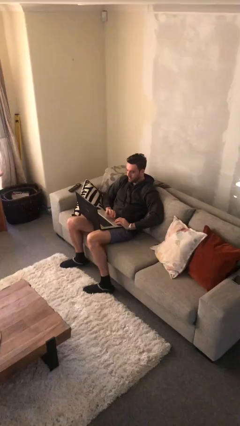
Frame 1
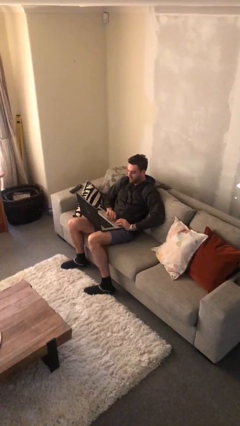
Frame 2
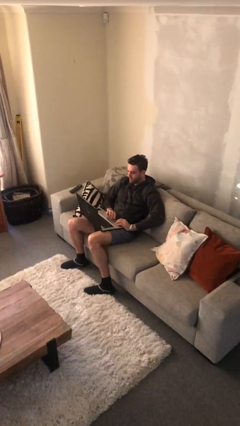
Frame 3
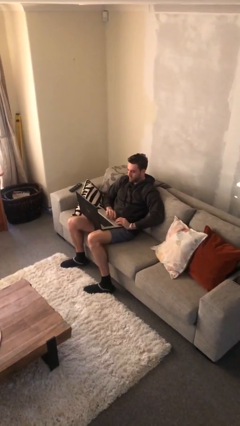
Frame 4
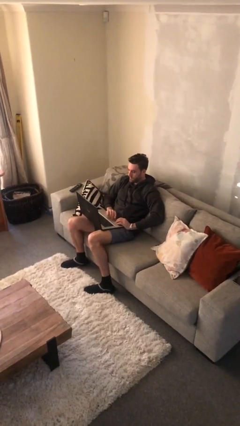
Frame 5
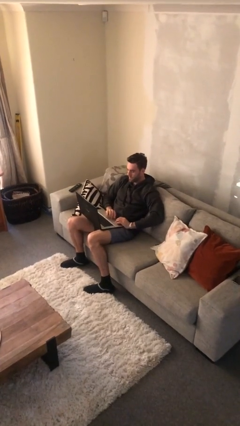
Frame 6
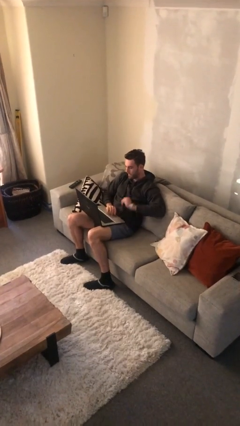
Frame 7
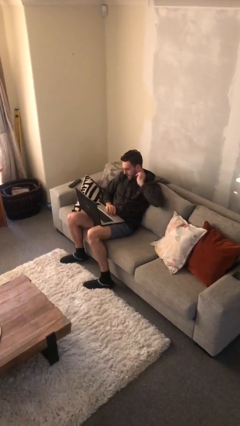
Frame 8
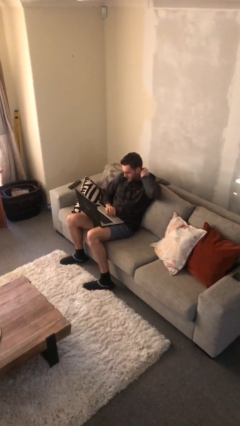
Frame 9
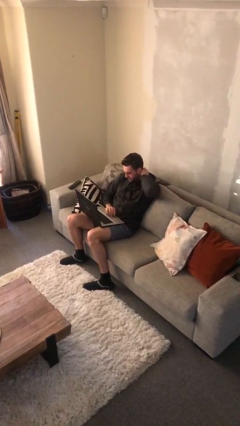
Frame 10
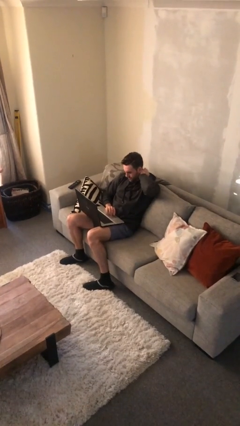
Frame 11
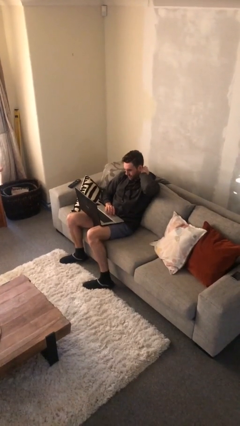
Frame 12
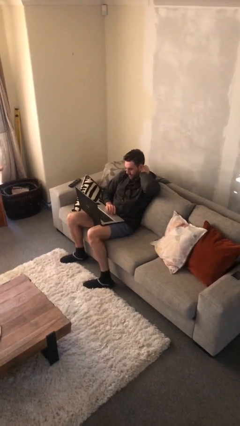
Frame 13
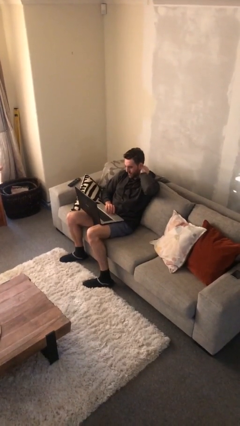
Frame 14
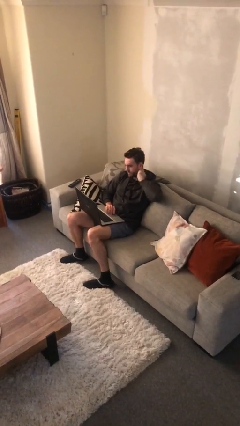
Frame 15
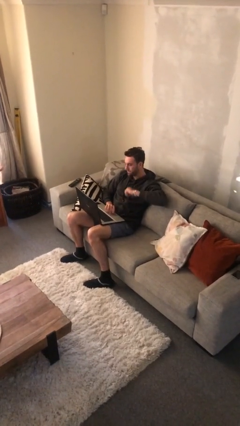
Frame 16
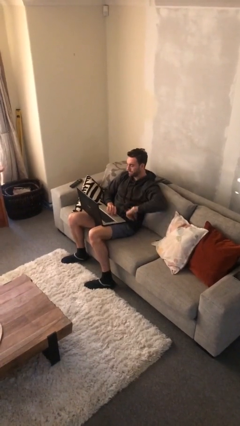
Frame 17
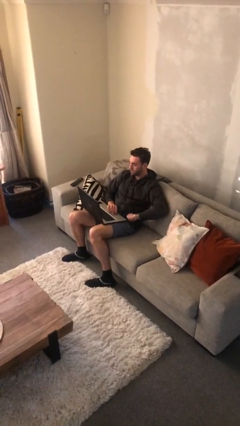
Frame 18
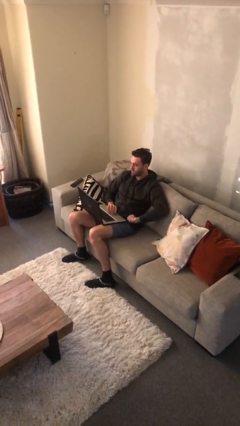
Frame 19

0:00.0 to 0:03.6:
person interacts with laptop

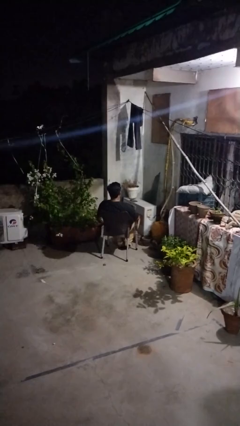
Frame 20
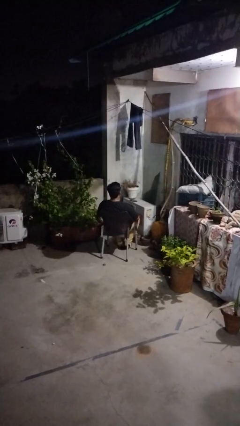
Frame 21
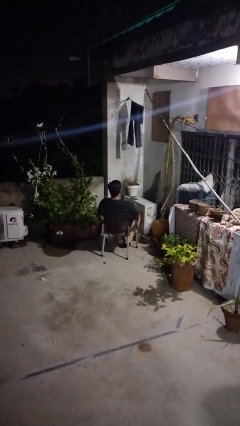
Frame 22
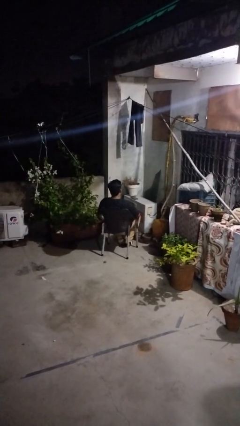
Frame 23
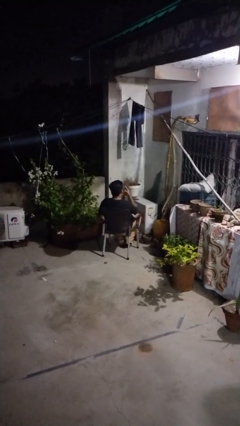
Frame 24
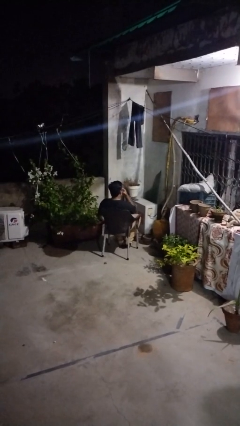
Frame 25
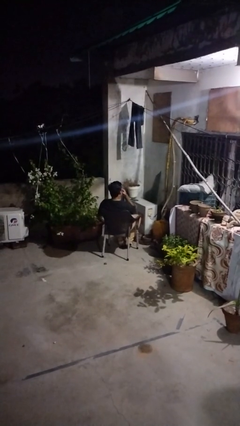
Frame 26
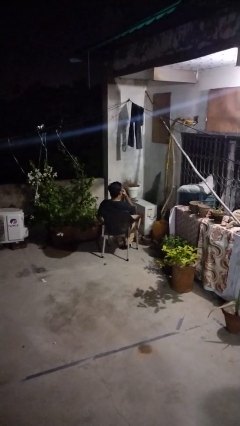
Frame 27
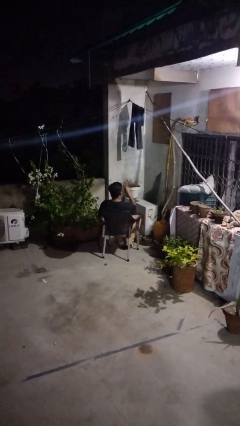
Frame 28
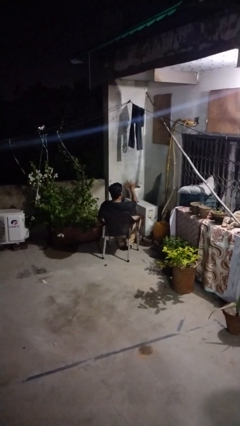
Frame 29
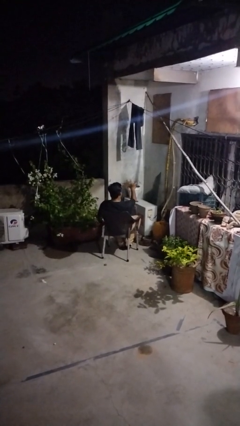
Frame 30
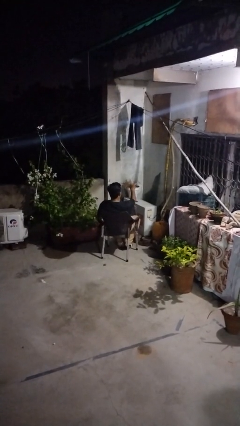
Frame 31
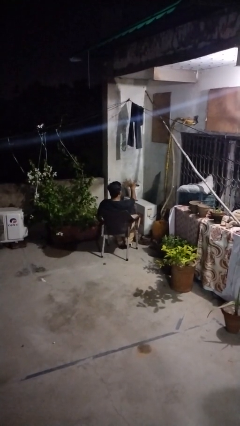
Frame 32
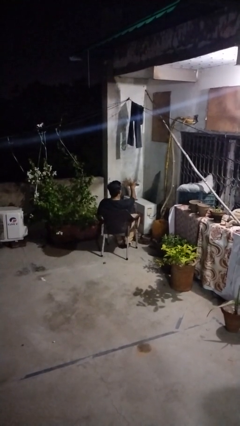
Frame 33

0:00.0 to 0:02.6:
person gestures watch closely

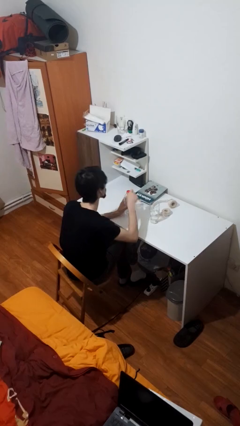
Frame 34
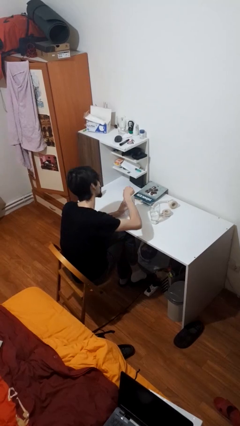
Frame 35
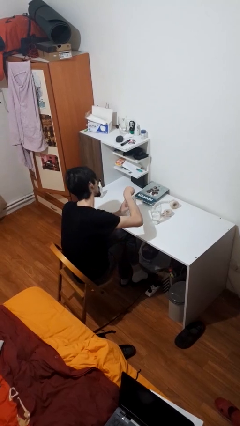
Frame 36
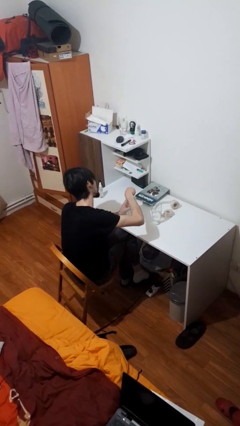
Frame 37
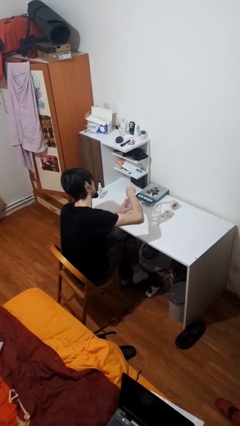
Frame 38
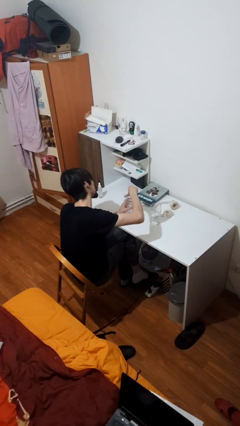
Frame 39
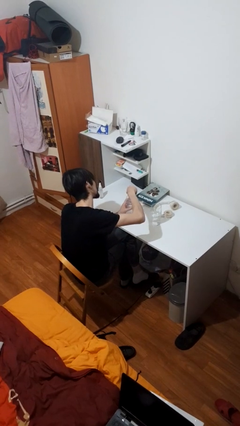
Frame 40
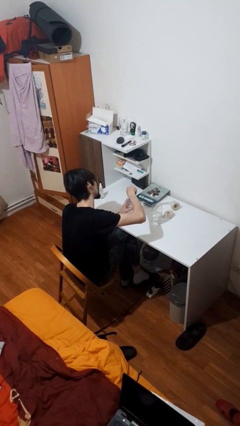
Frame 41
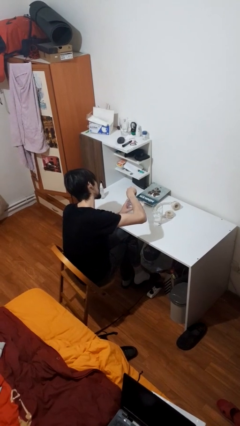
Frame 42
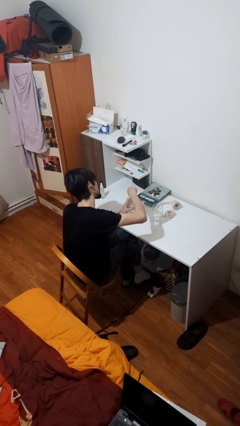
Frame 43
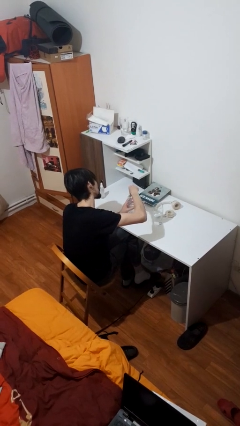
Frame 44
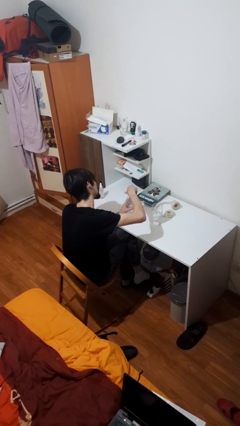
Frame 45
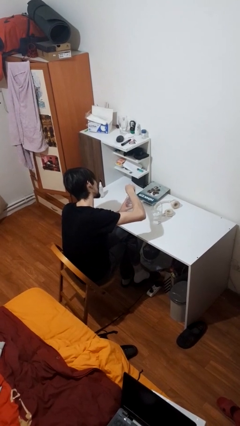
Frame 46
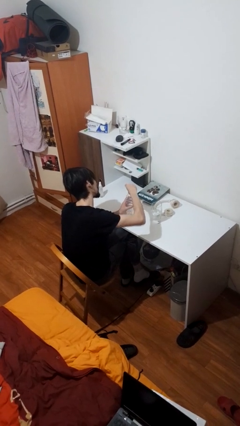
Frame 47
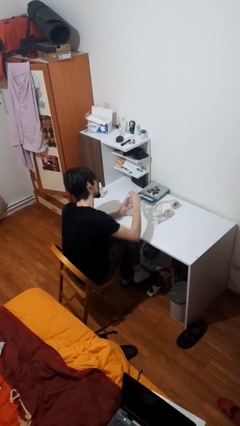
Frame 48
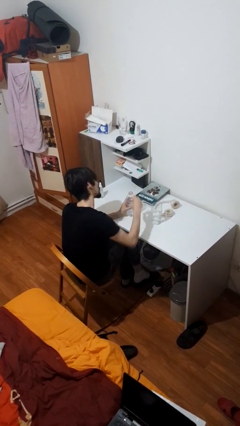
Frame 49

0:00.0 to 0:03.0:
person unscrews lid from bottle

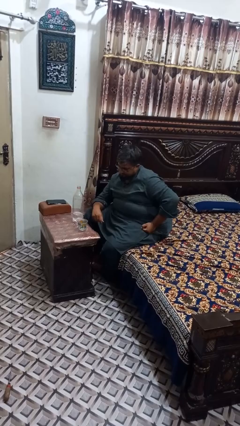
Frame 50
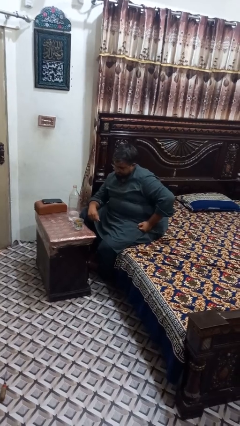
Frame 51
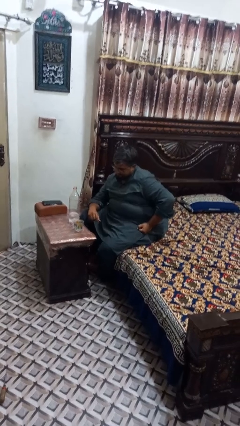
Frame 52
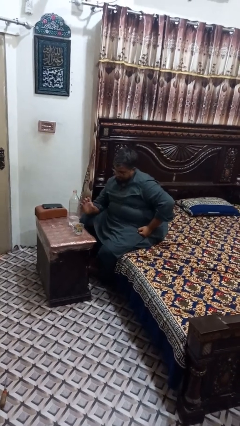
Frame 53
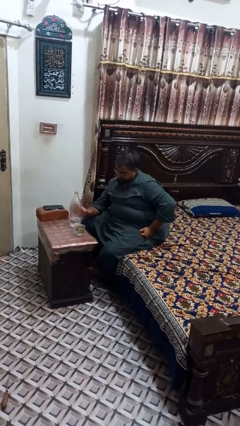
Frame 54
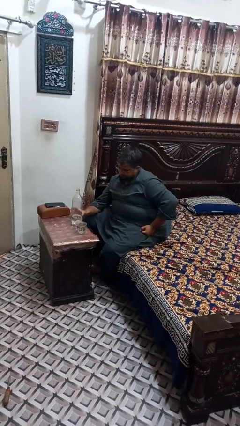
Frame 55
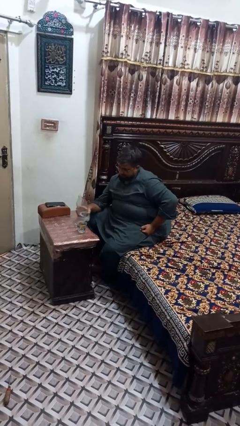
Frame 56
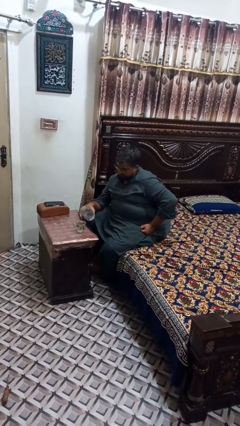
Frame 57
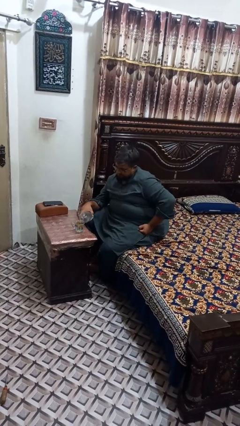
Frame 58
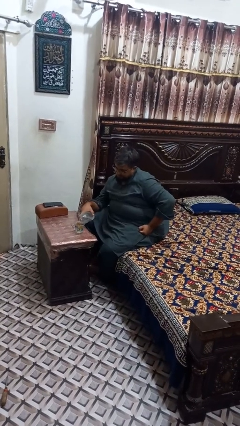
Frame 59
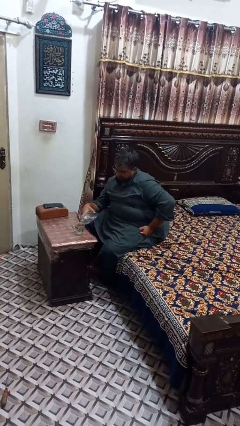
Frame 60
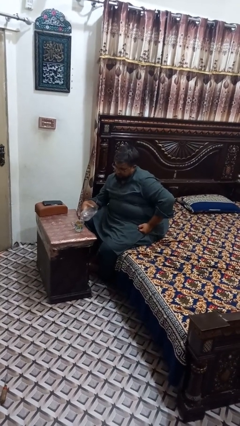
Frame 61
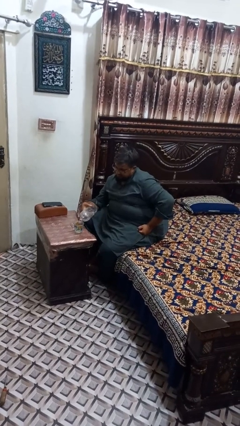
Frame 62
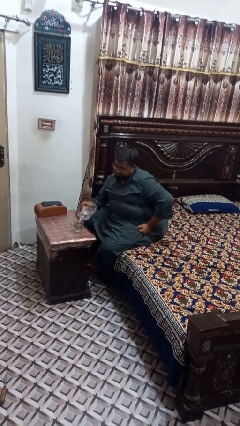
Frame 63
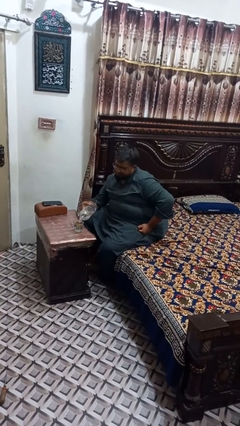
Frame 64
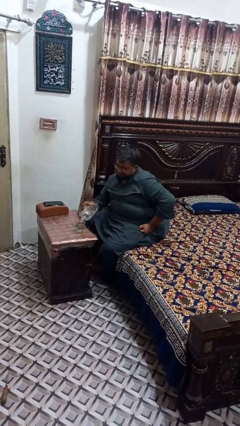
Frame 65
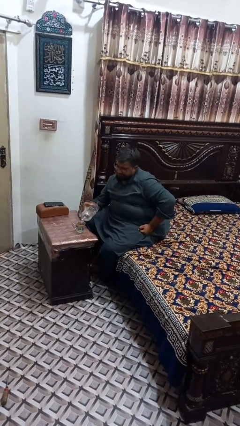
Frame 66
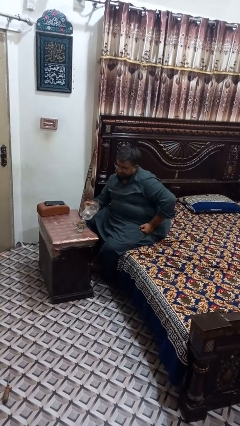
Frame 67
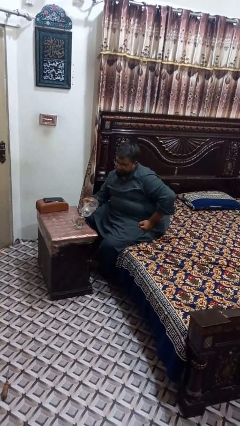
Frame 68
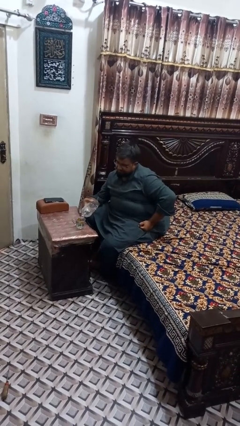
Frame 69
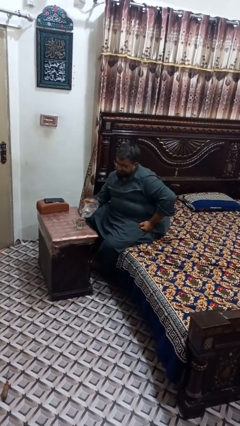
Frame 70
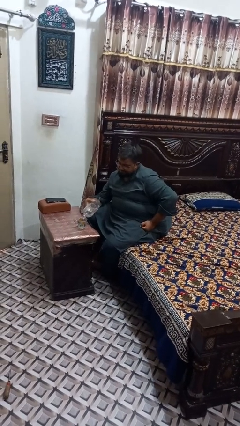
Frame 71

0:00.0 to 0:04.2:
person pours liquid into cup

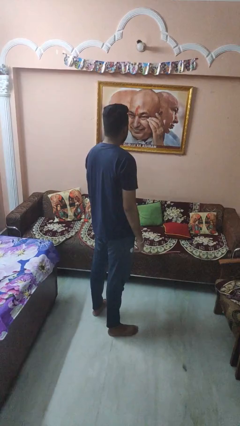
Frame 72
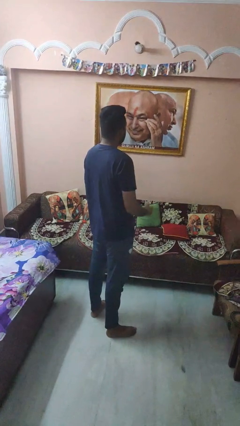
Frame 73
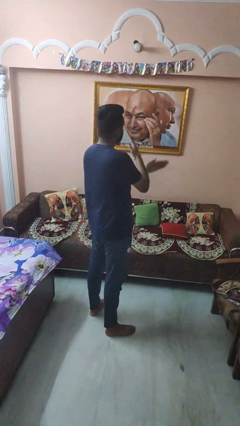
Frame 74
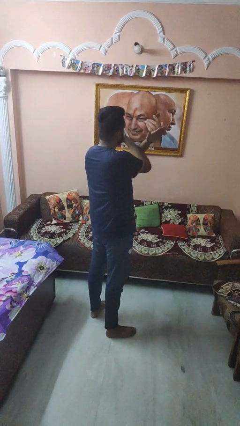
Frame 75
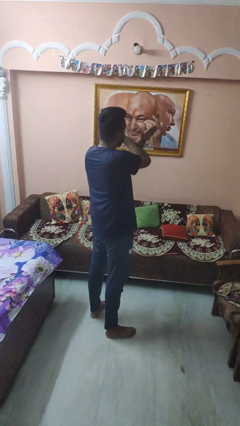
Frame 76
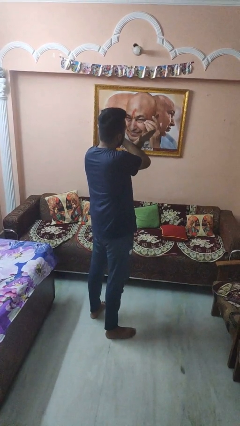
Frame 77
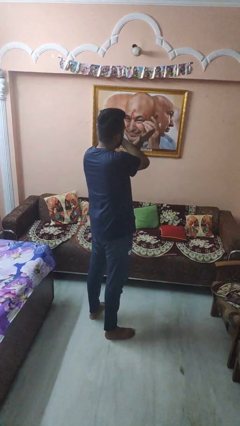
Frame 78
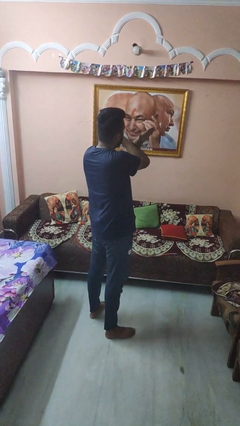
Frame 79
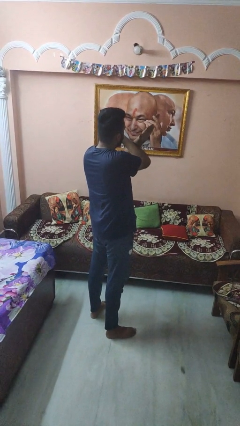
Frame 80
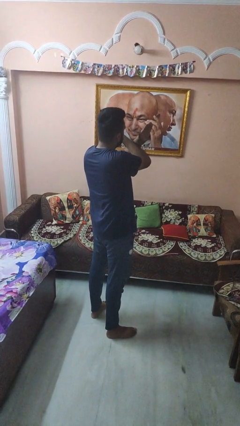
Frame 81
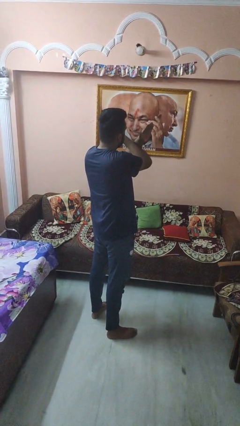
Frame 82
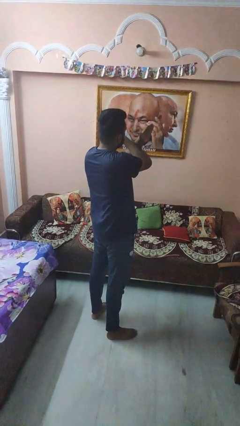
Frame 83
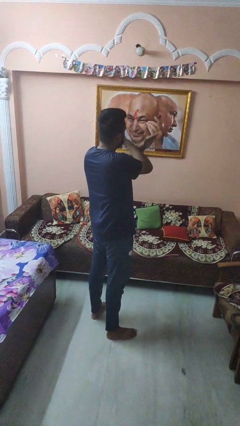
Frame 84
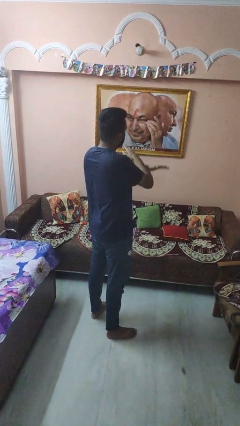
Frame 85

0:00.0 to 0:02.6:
person gestures arms x

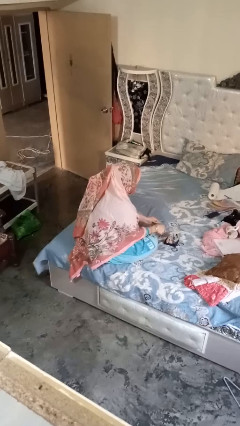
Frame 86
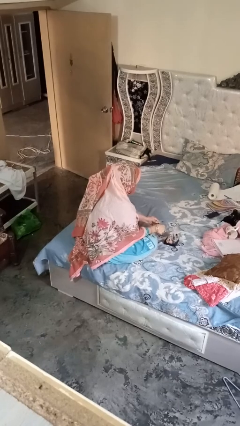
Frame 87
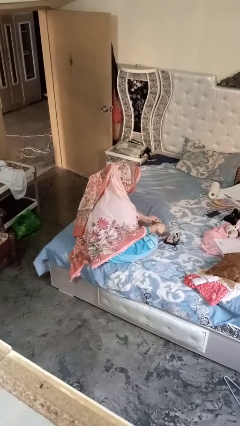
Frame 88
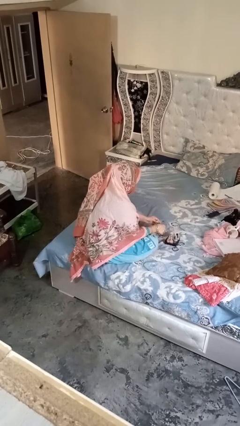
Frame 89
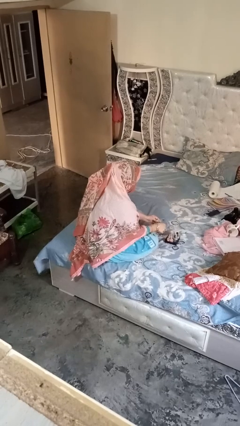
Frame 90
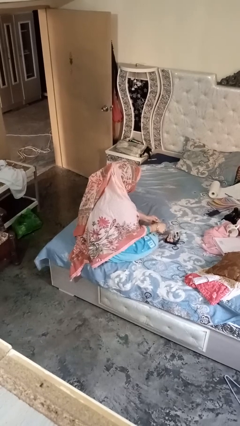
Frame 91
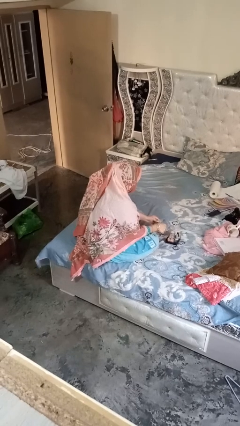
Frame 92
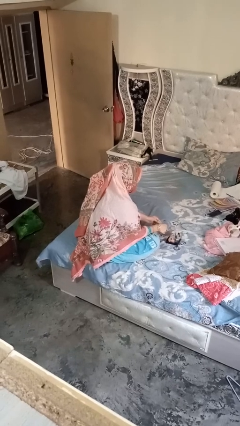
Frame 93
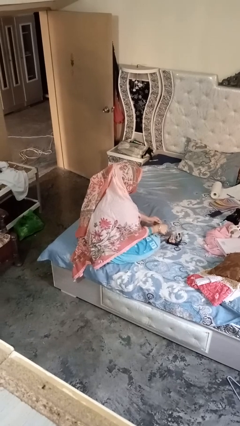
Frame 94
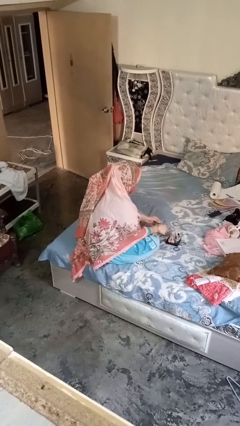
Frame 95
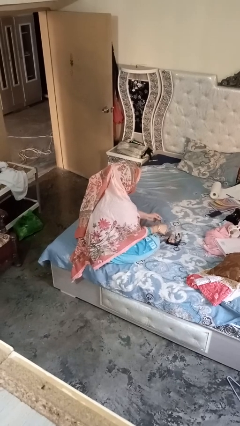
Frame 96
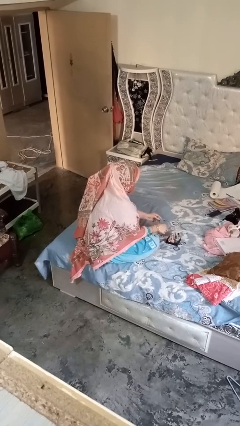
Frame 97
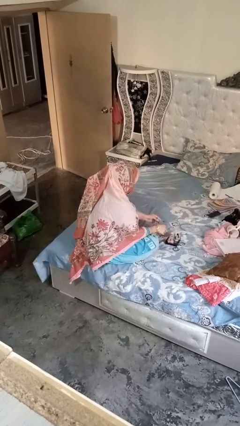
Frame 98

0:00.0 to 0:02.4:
person paints fingernails
